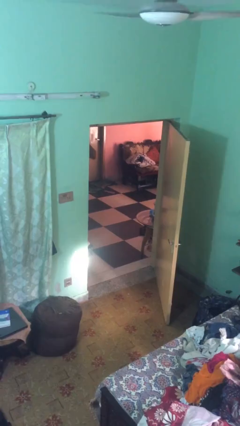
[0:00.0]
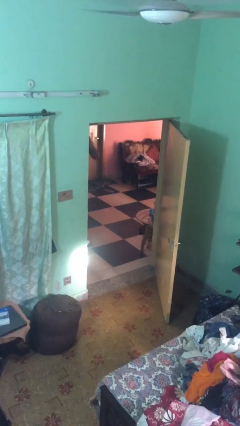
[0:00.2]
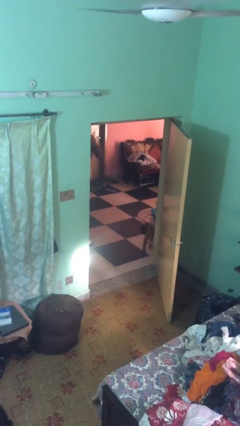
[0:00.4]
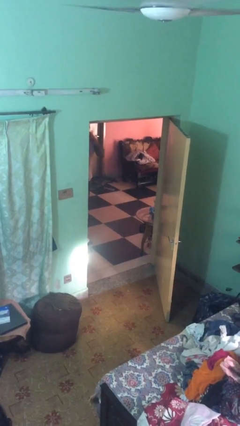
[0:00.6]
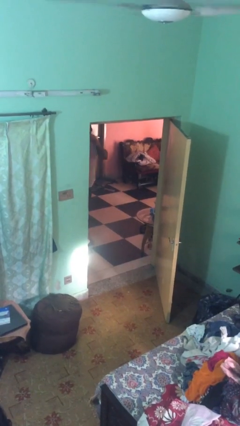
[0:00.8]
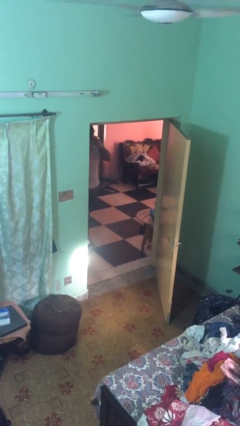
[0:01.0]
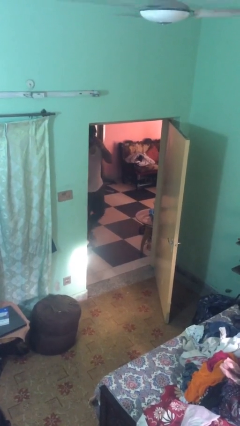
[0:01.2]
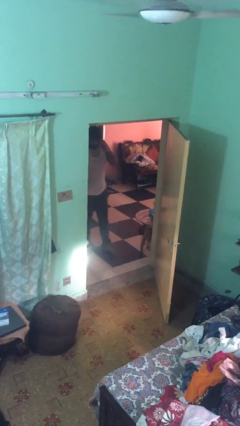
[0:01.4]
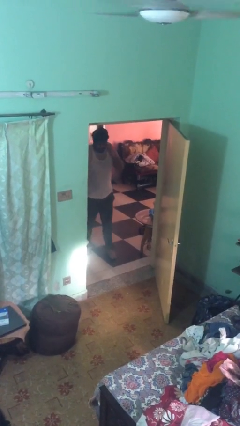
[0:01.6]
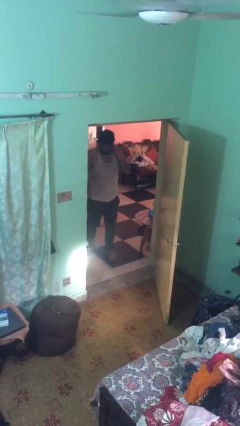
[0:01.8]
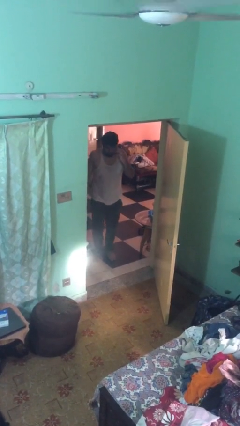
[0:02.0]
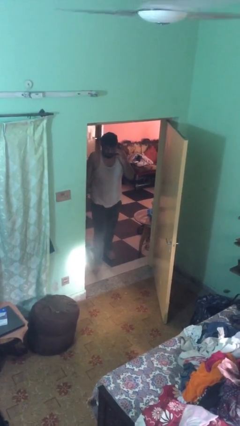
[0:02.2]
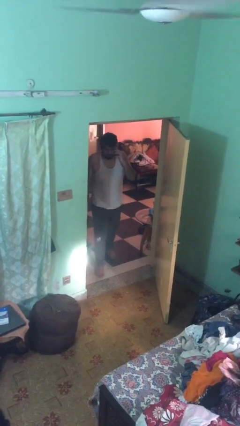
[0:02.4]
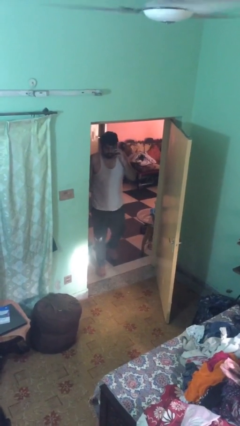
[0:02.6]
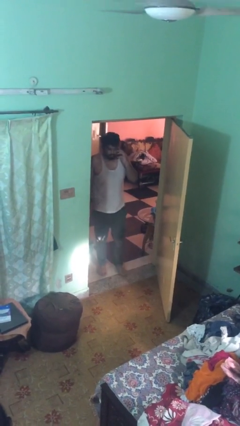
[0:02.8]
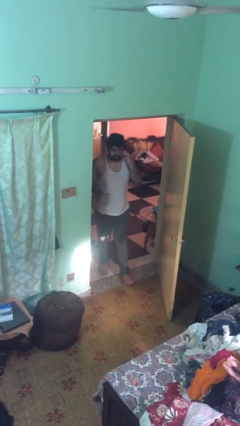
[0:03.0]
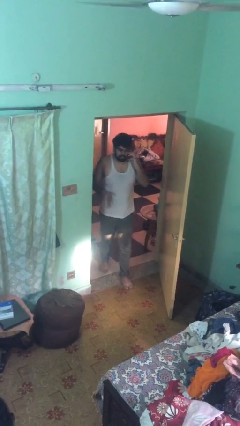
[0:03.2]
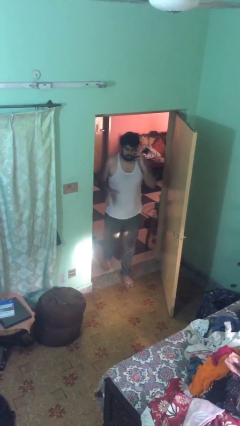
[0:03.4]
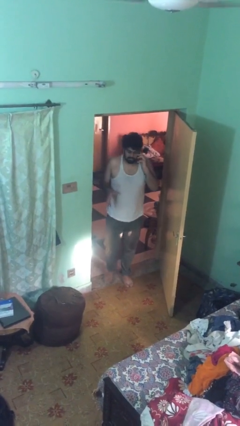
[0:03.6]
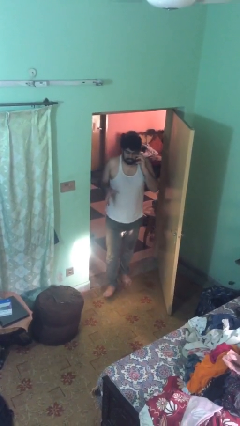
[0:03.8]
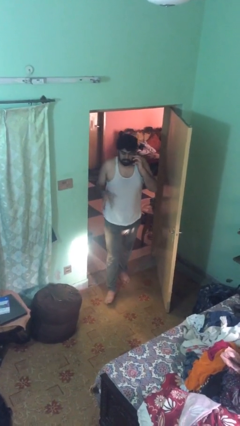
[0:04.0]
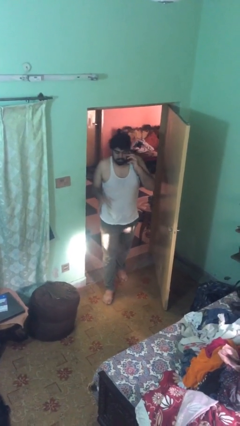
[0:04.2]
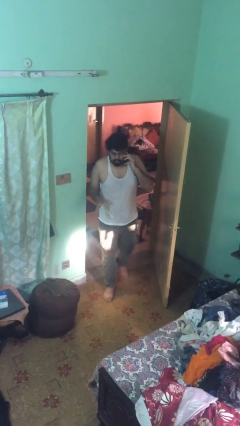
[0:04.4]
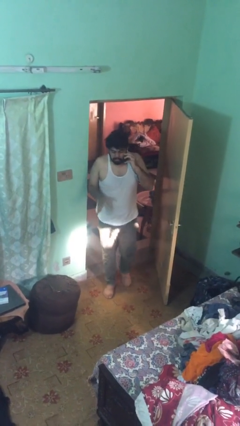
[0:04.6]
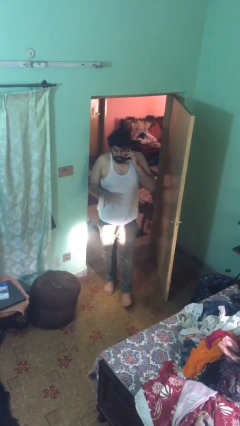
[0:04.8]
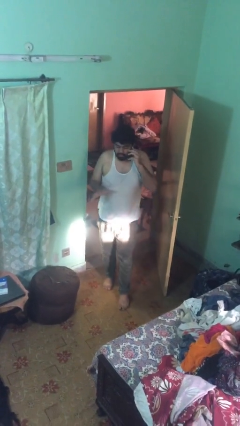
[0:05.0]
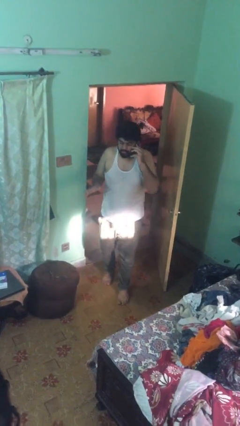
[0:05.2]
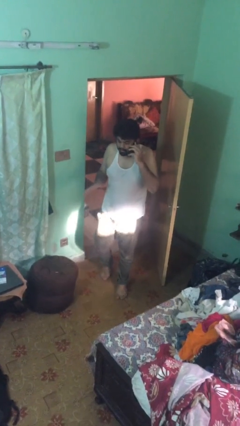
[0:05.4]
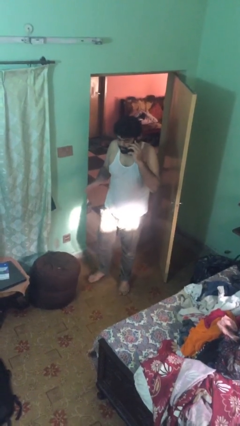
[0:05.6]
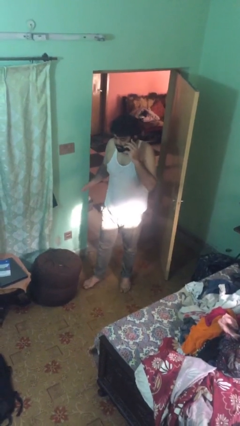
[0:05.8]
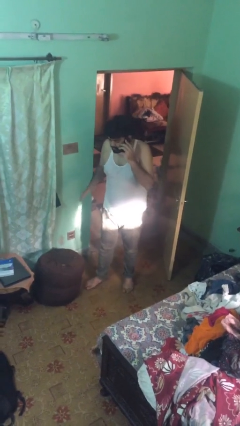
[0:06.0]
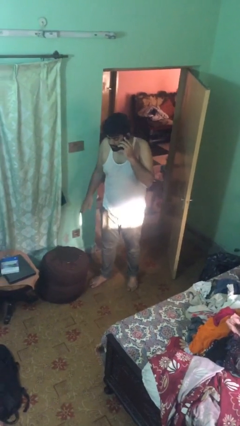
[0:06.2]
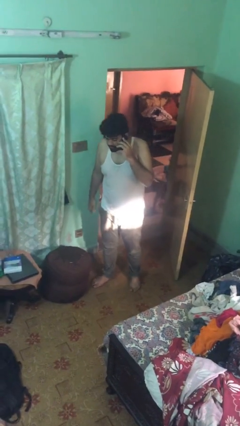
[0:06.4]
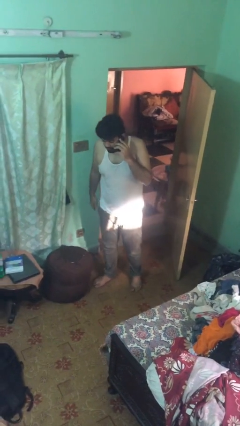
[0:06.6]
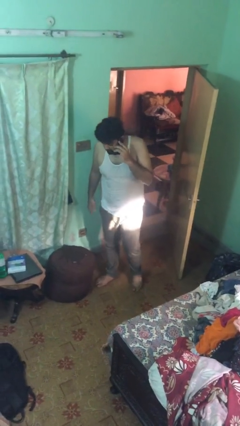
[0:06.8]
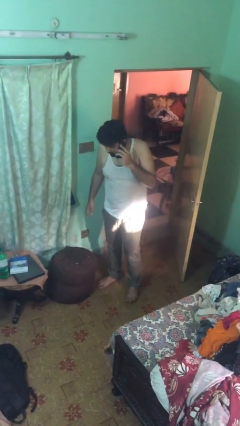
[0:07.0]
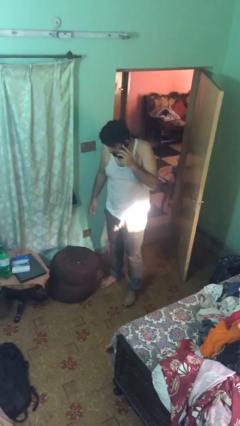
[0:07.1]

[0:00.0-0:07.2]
person enters scene through structure

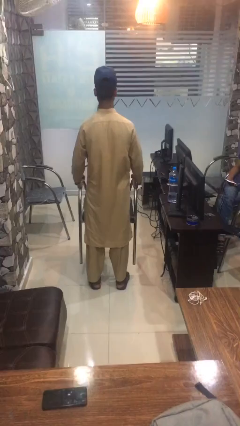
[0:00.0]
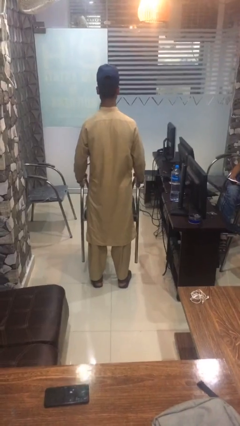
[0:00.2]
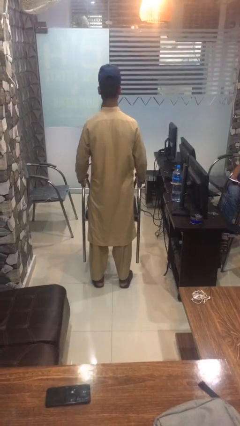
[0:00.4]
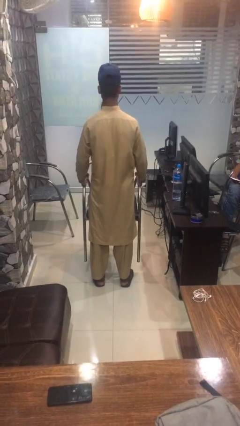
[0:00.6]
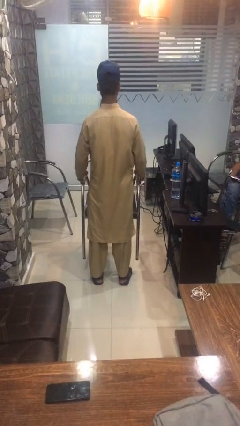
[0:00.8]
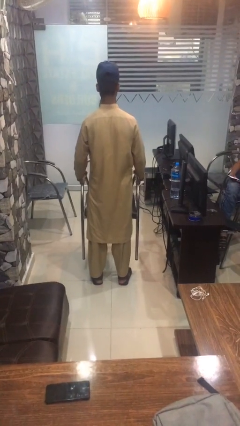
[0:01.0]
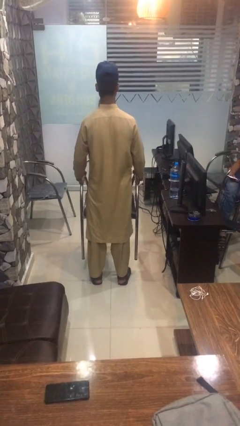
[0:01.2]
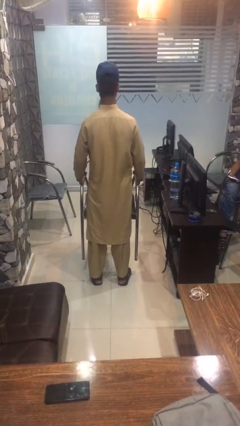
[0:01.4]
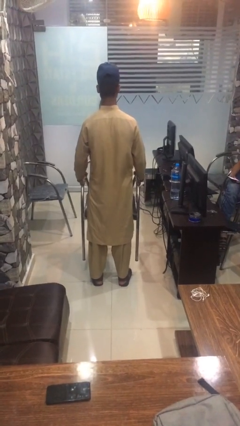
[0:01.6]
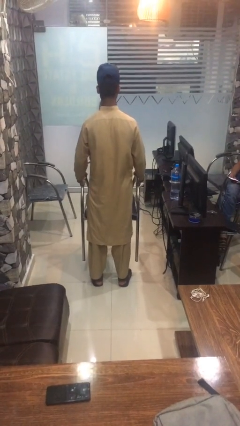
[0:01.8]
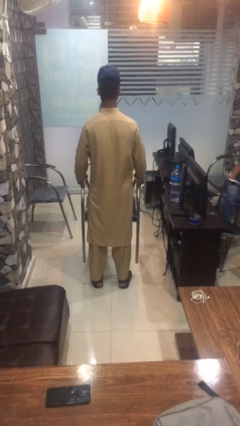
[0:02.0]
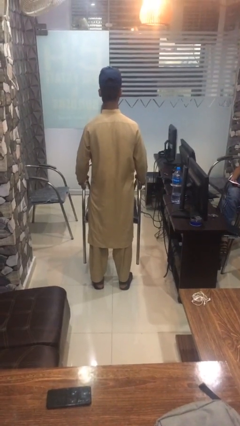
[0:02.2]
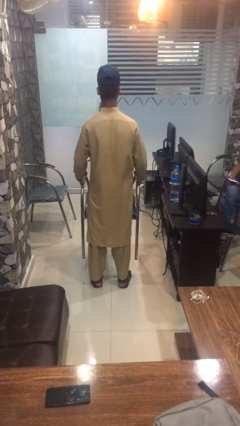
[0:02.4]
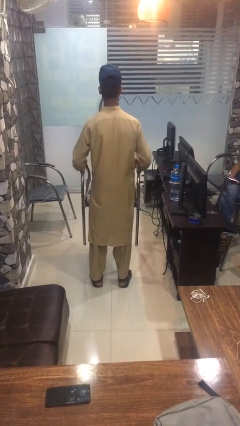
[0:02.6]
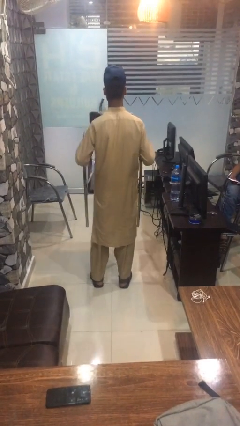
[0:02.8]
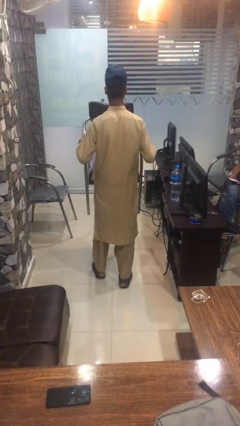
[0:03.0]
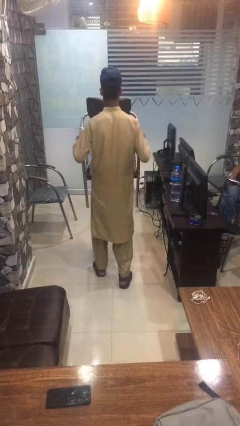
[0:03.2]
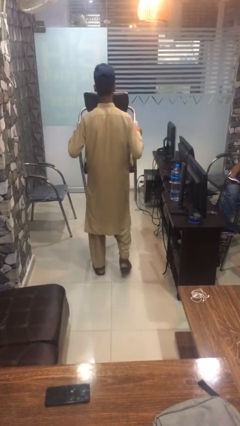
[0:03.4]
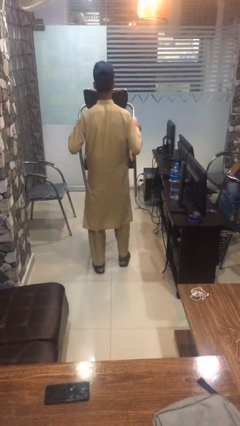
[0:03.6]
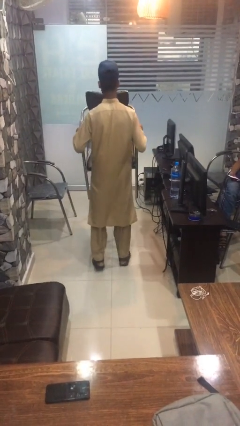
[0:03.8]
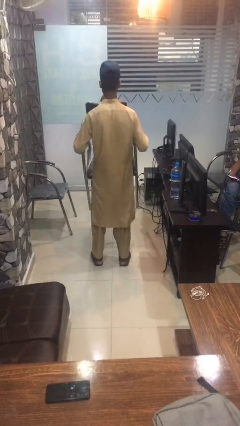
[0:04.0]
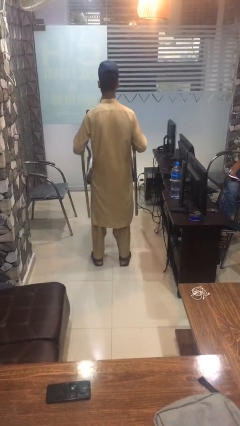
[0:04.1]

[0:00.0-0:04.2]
person carries furniture

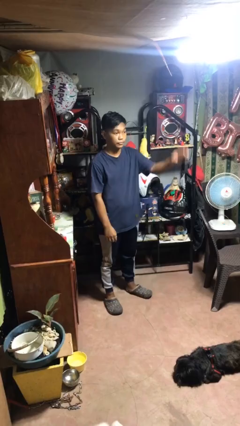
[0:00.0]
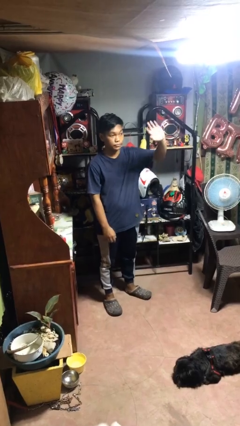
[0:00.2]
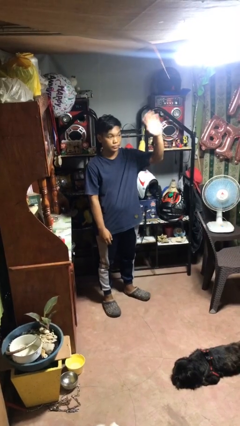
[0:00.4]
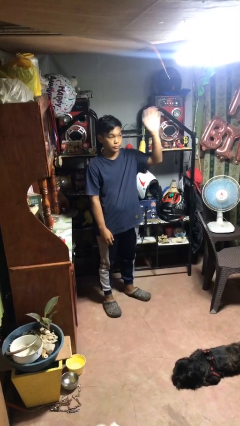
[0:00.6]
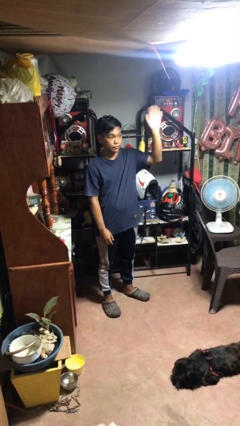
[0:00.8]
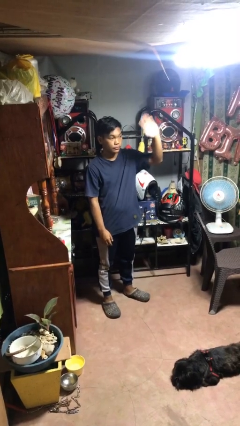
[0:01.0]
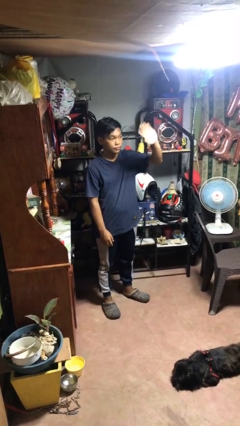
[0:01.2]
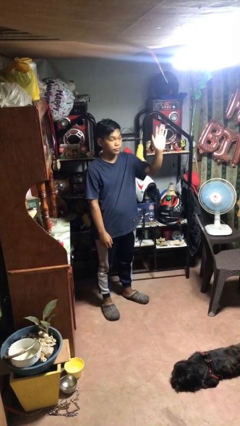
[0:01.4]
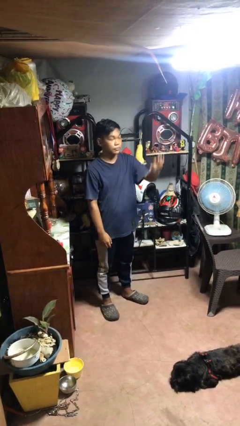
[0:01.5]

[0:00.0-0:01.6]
person waves at person

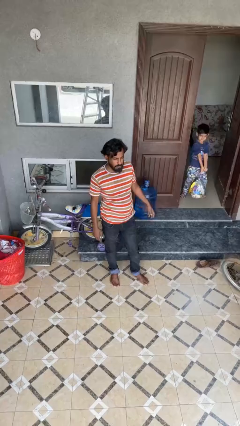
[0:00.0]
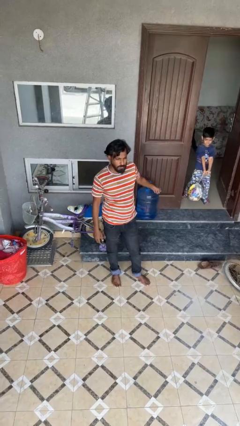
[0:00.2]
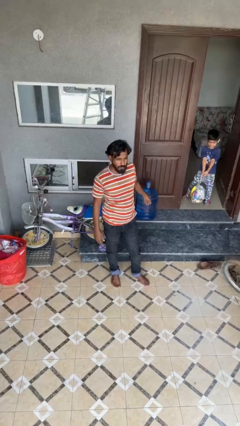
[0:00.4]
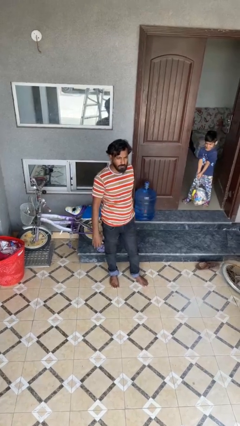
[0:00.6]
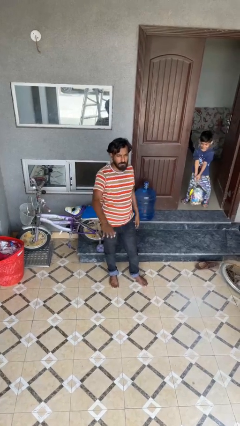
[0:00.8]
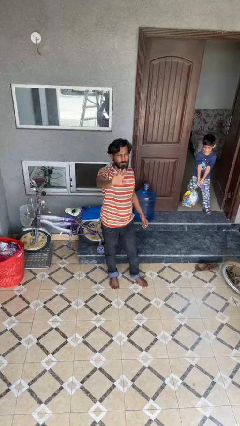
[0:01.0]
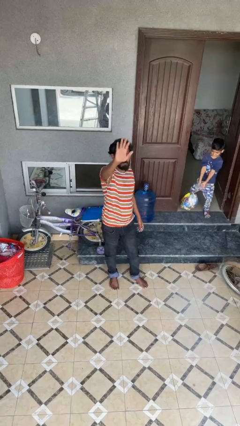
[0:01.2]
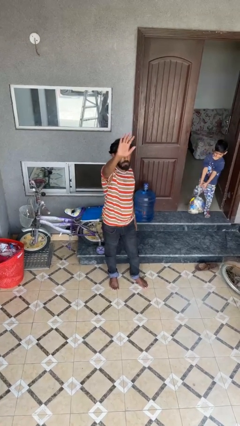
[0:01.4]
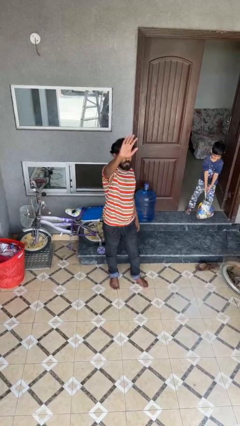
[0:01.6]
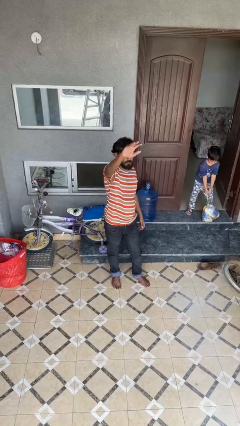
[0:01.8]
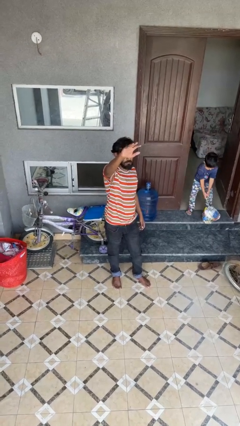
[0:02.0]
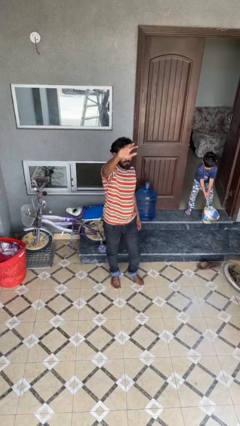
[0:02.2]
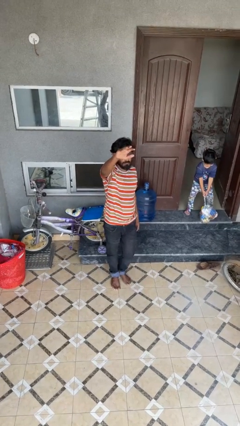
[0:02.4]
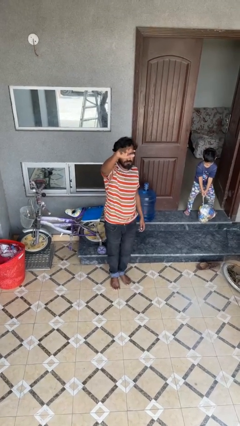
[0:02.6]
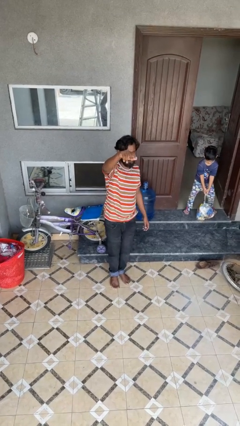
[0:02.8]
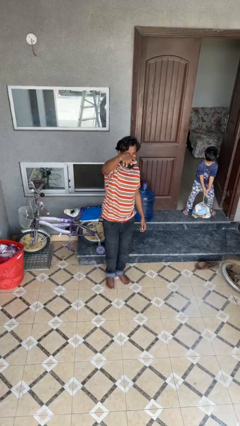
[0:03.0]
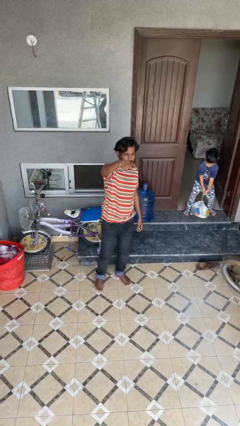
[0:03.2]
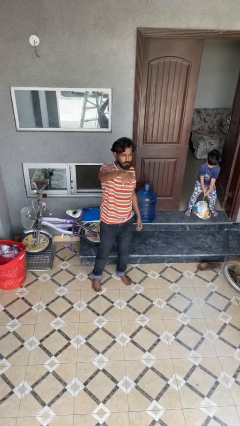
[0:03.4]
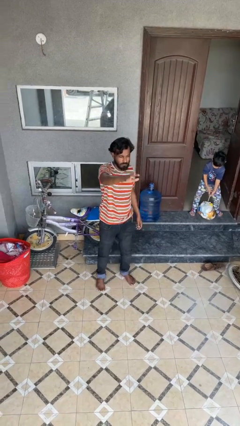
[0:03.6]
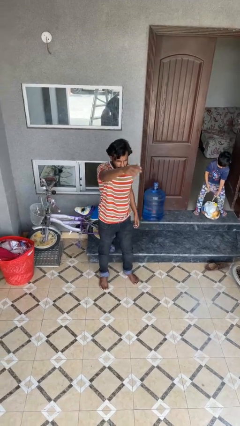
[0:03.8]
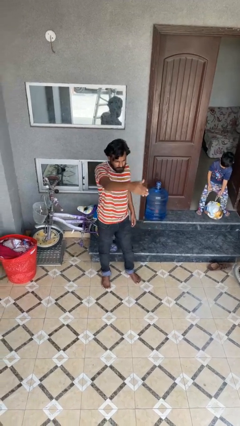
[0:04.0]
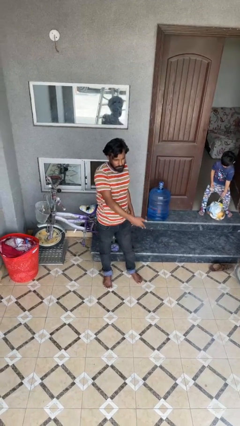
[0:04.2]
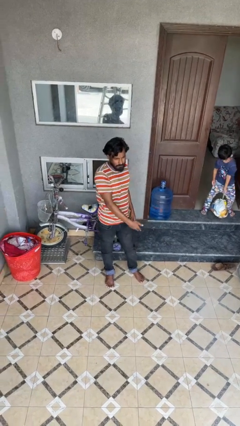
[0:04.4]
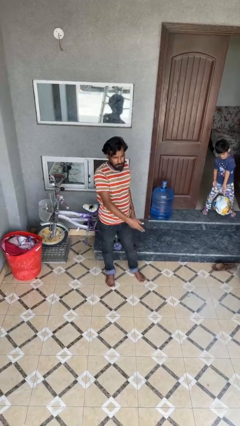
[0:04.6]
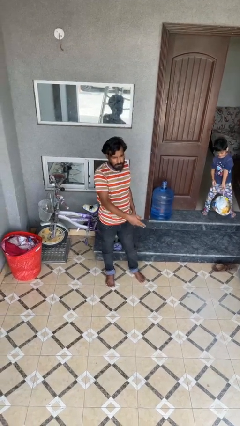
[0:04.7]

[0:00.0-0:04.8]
person gestures come here
